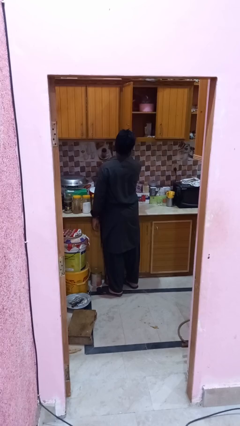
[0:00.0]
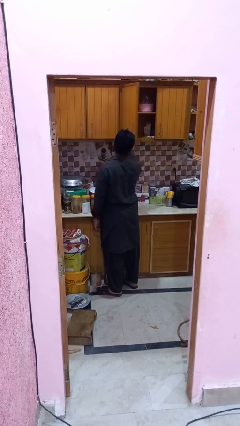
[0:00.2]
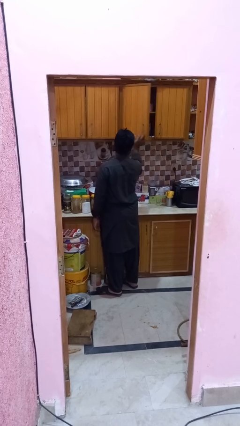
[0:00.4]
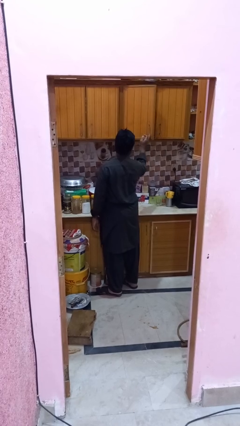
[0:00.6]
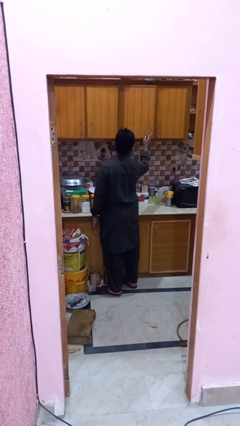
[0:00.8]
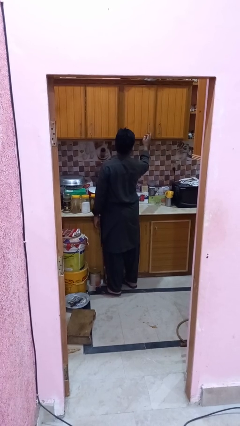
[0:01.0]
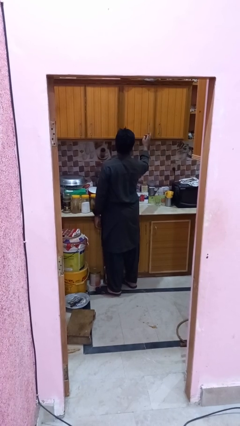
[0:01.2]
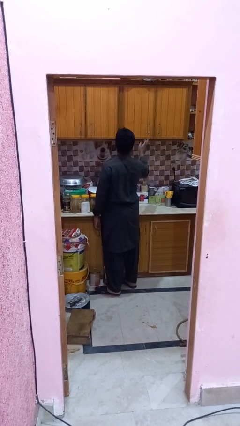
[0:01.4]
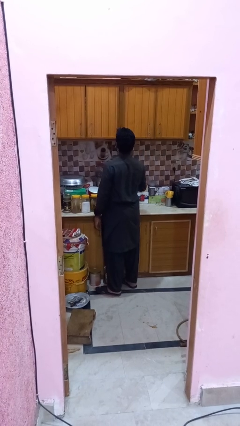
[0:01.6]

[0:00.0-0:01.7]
person closes cabinet

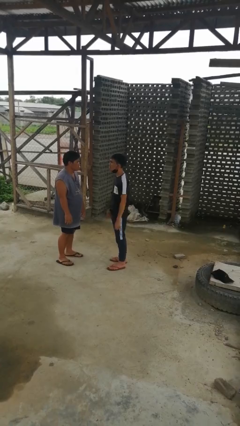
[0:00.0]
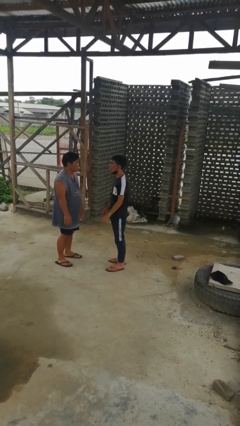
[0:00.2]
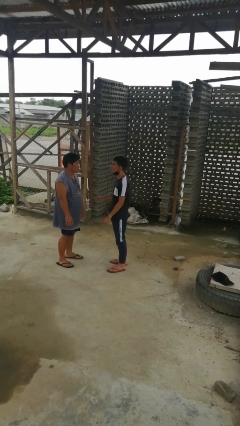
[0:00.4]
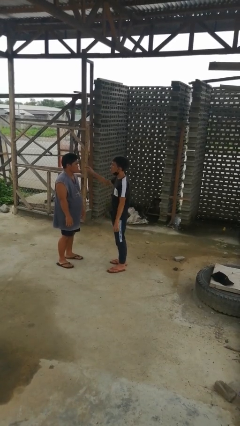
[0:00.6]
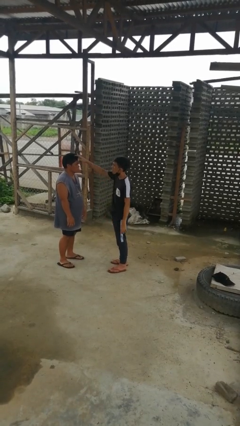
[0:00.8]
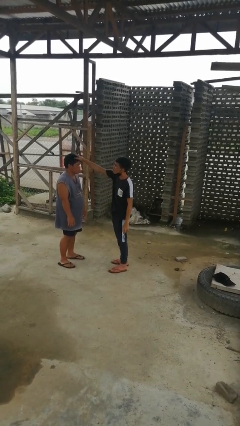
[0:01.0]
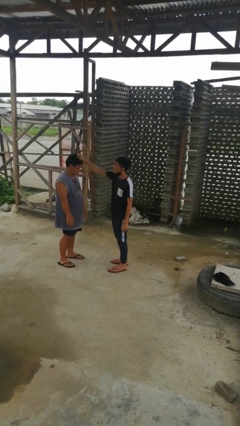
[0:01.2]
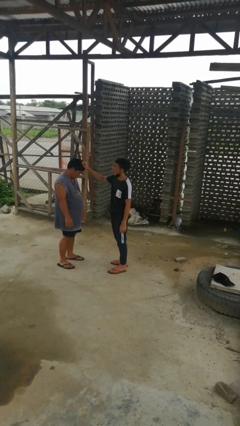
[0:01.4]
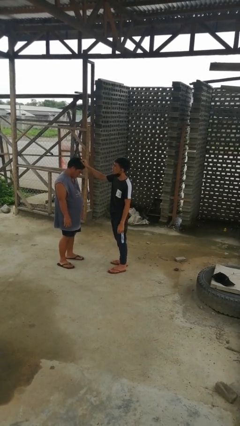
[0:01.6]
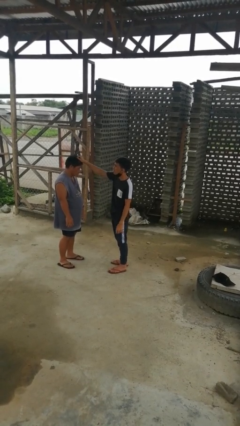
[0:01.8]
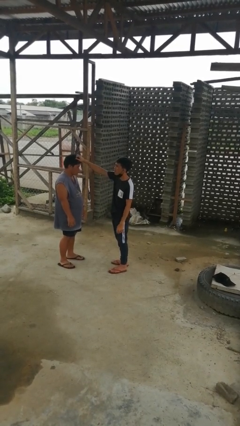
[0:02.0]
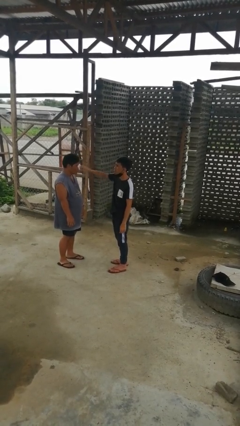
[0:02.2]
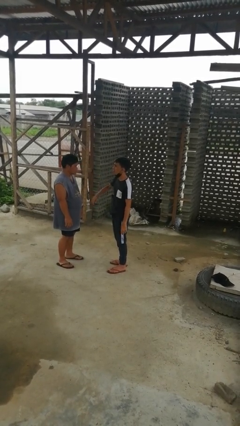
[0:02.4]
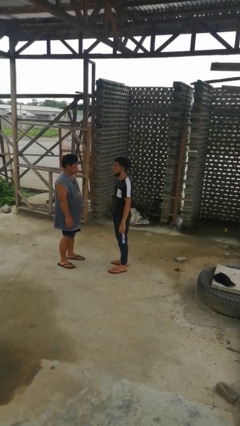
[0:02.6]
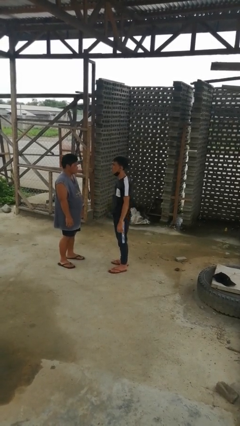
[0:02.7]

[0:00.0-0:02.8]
person grabs person by hair

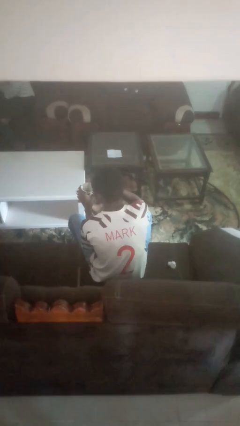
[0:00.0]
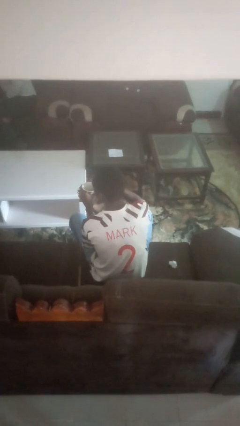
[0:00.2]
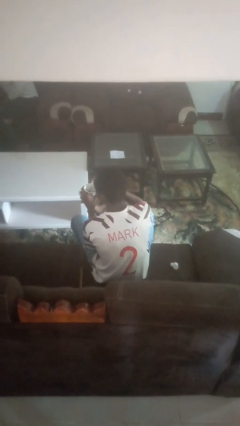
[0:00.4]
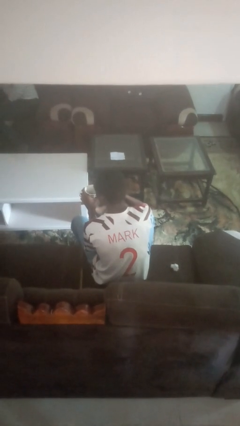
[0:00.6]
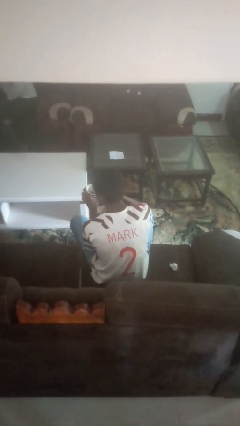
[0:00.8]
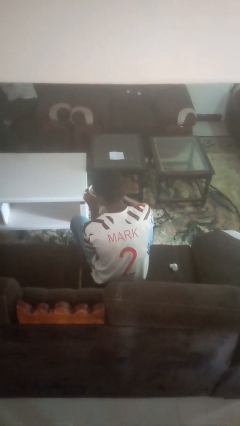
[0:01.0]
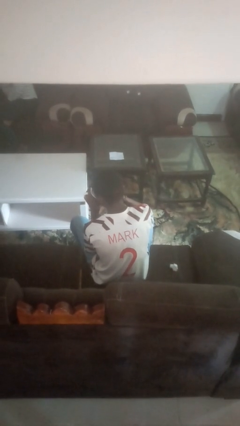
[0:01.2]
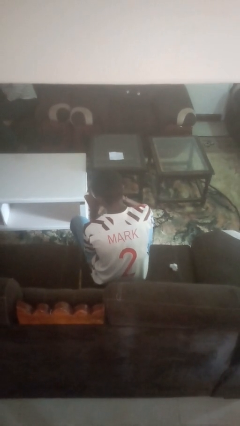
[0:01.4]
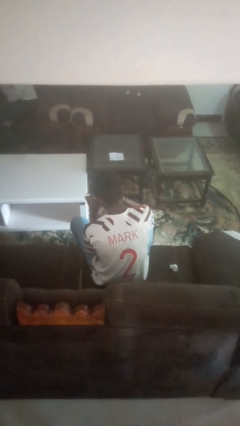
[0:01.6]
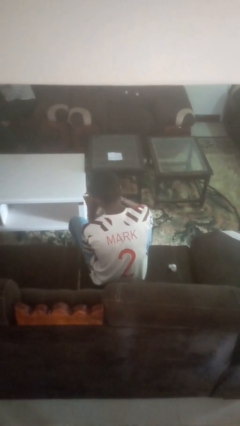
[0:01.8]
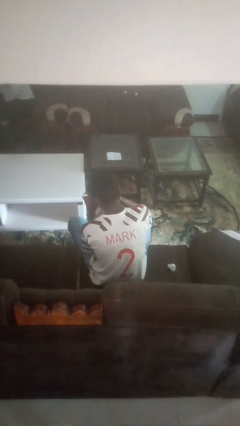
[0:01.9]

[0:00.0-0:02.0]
person drinks from mug

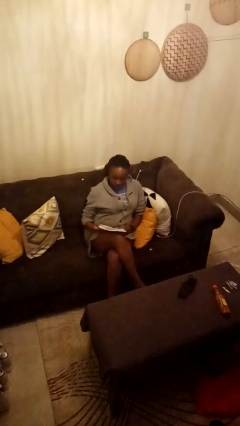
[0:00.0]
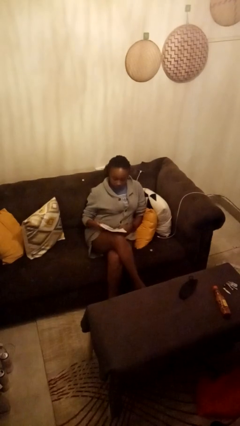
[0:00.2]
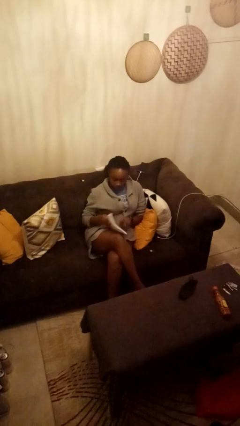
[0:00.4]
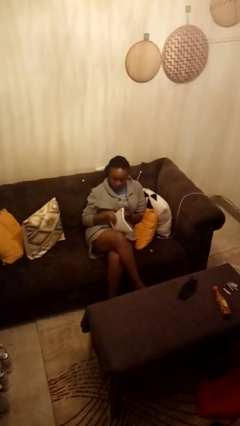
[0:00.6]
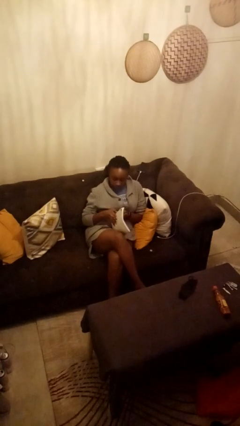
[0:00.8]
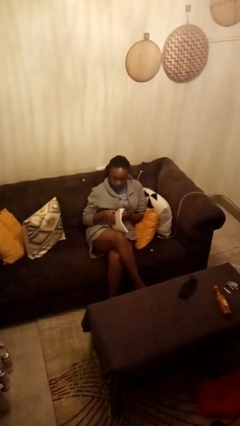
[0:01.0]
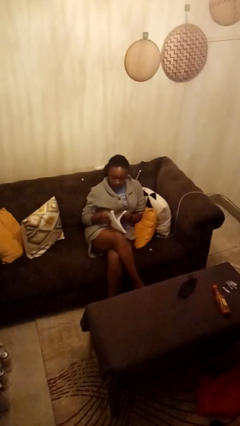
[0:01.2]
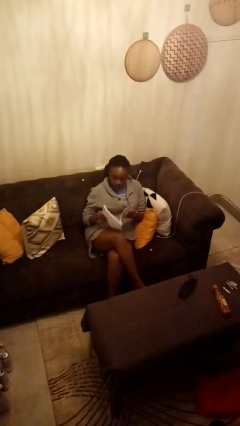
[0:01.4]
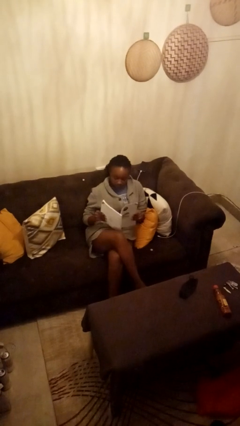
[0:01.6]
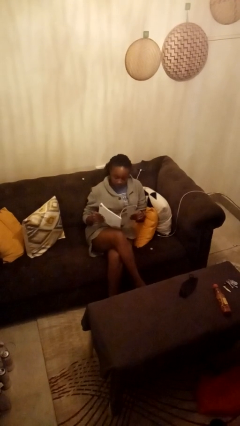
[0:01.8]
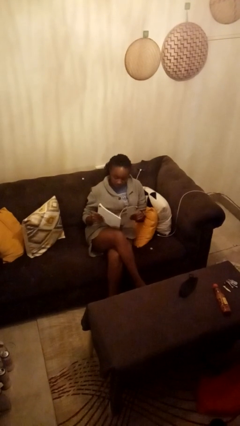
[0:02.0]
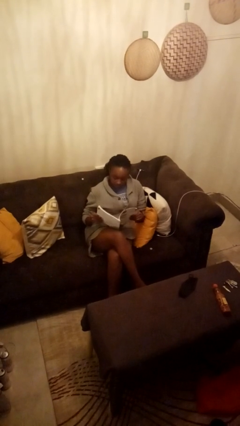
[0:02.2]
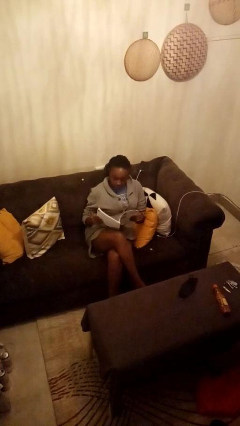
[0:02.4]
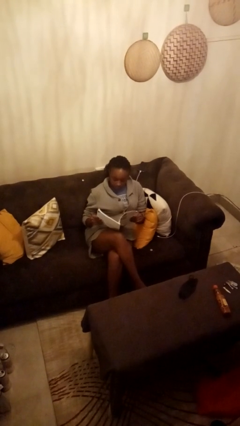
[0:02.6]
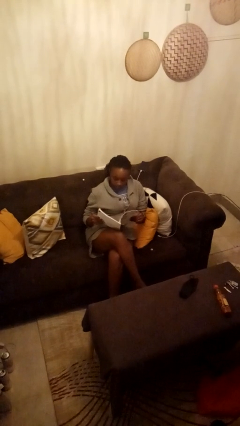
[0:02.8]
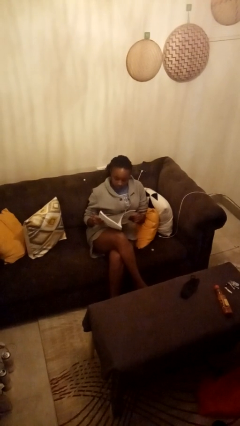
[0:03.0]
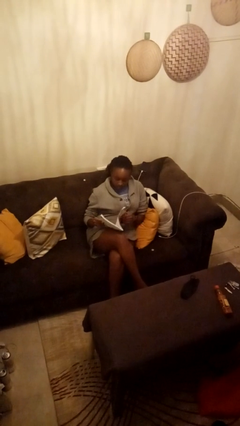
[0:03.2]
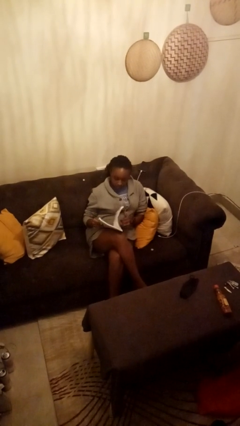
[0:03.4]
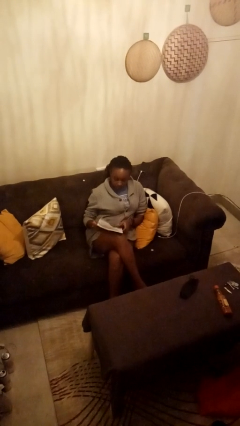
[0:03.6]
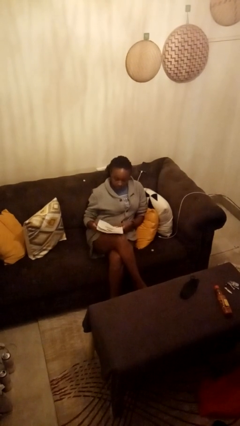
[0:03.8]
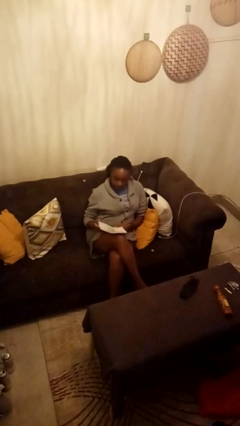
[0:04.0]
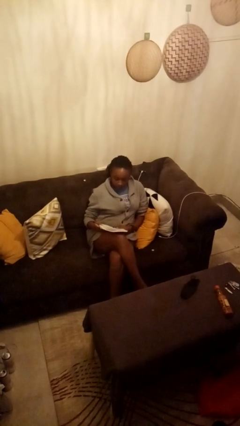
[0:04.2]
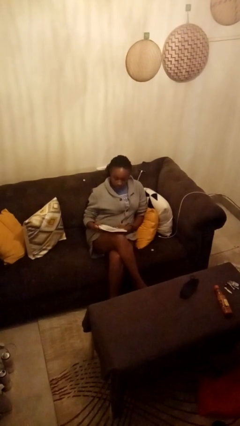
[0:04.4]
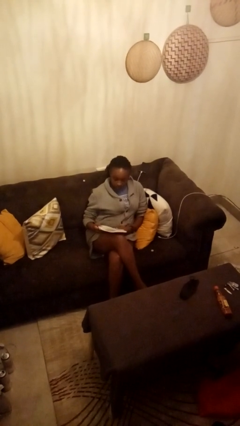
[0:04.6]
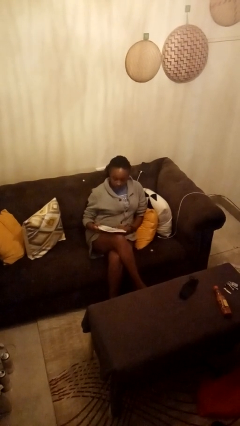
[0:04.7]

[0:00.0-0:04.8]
person reads magazine

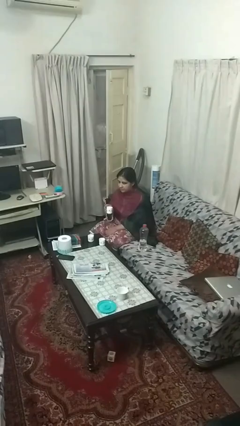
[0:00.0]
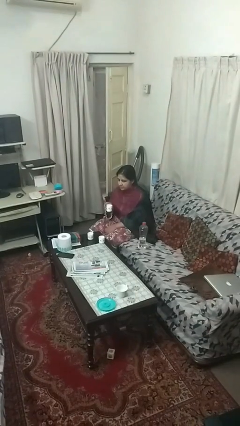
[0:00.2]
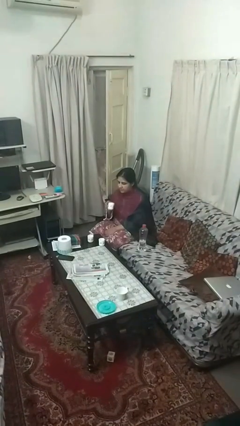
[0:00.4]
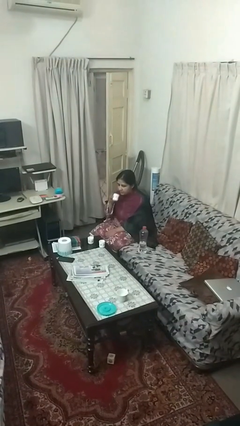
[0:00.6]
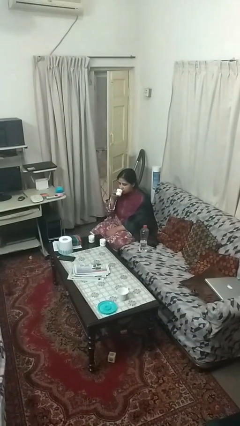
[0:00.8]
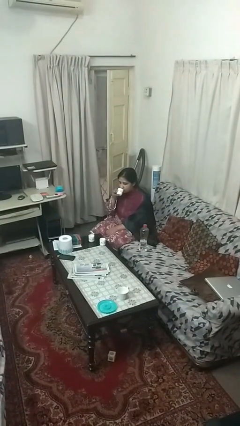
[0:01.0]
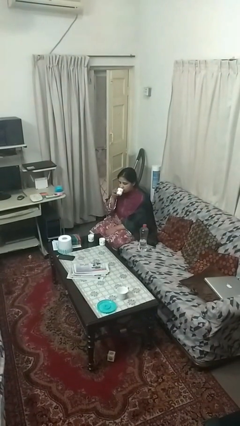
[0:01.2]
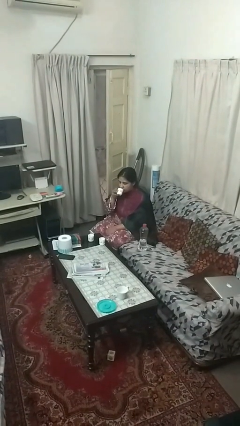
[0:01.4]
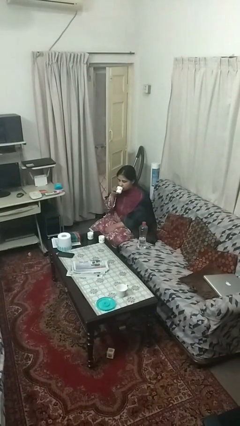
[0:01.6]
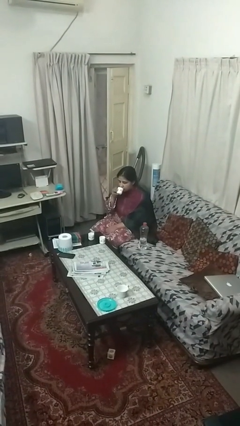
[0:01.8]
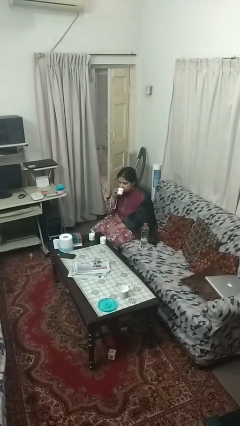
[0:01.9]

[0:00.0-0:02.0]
person drinks from shotglass

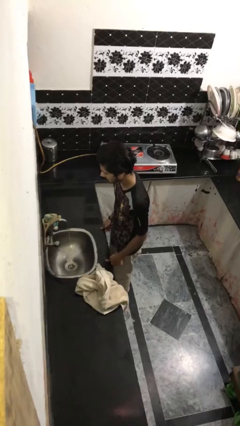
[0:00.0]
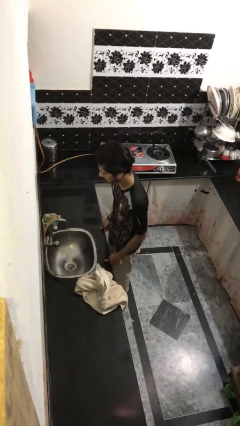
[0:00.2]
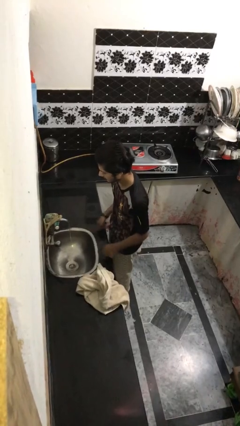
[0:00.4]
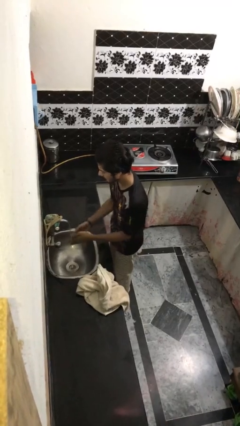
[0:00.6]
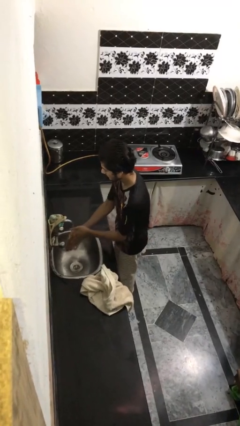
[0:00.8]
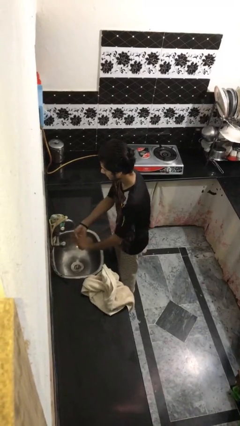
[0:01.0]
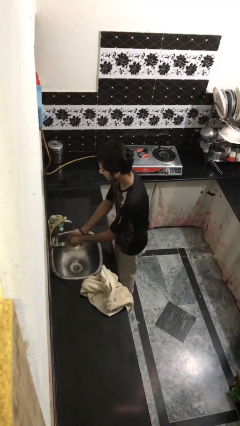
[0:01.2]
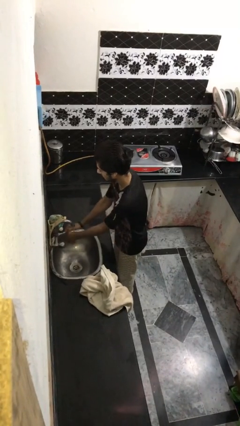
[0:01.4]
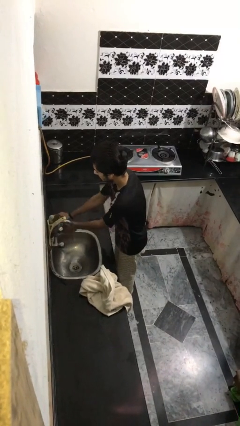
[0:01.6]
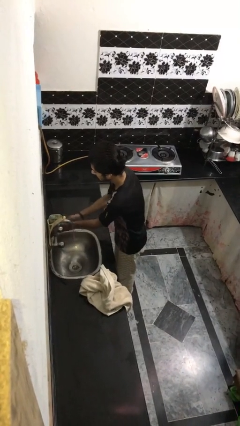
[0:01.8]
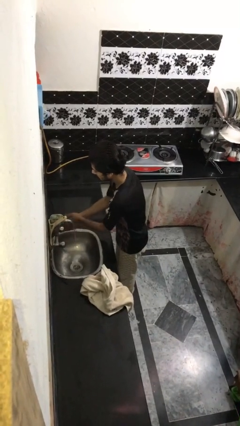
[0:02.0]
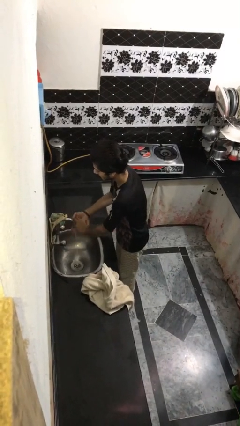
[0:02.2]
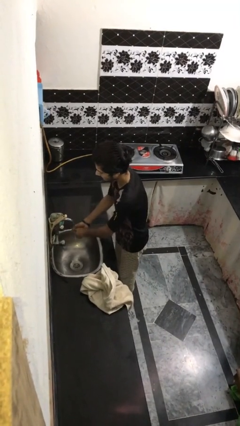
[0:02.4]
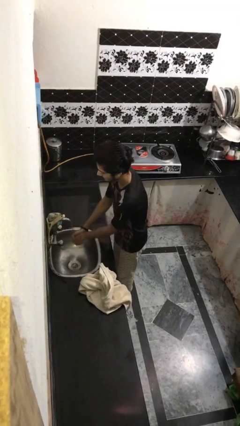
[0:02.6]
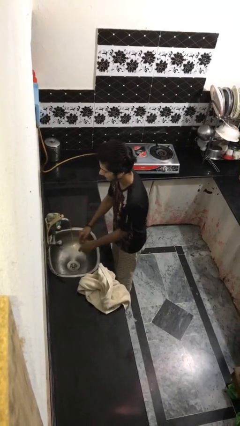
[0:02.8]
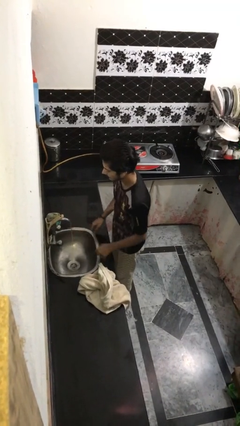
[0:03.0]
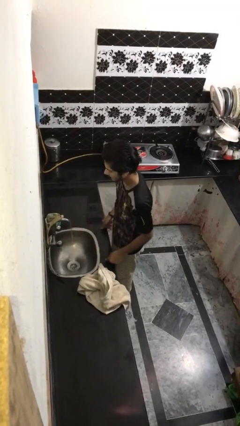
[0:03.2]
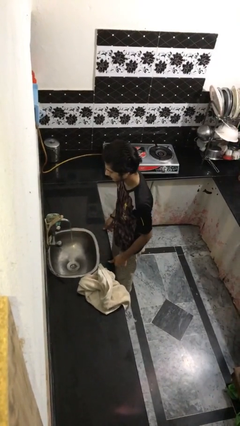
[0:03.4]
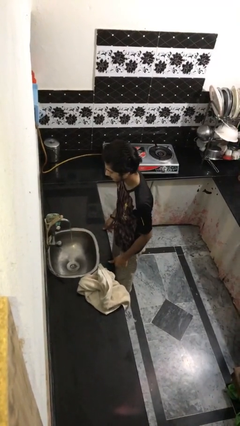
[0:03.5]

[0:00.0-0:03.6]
person washes face

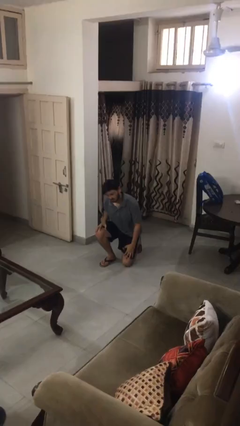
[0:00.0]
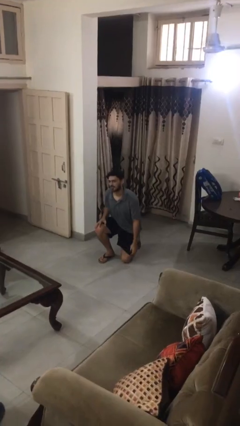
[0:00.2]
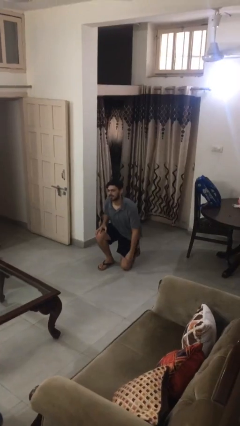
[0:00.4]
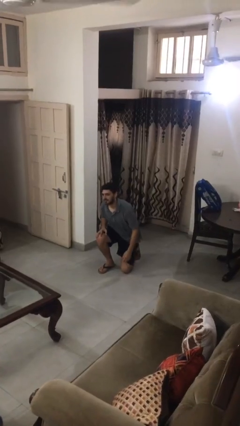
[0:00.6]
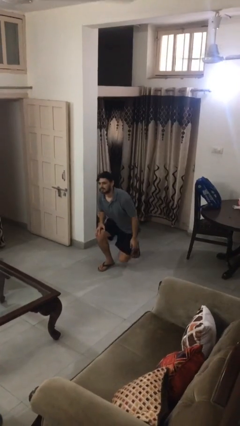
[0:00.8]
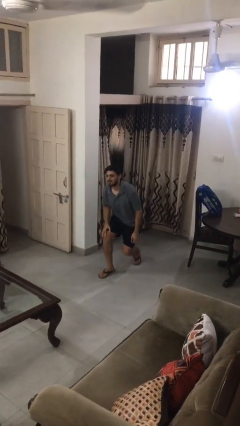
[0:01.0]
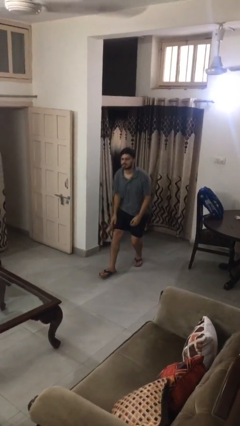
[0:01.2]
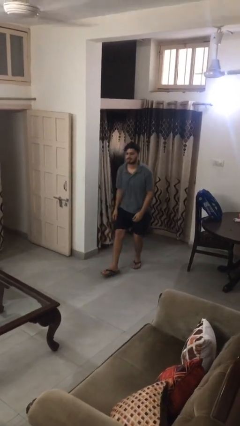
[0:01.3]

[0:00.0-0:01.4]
person stands up from floor
